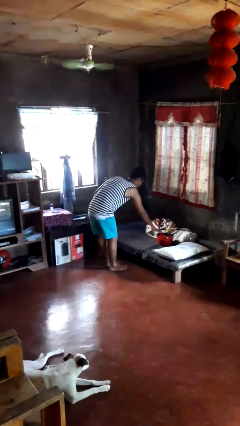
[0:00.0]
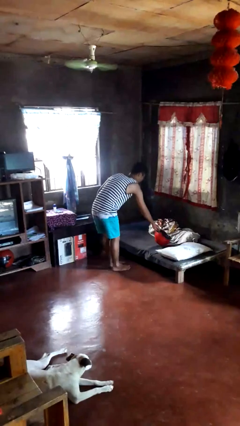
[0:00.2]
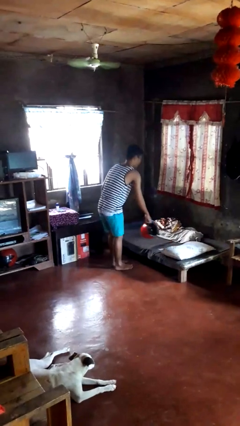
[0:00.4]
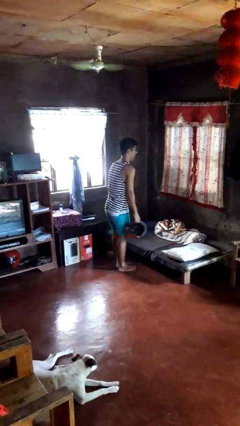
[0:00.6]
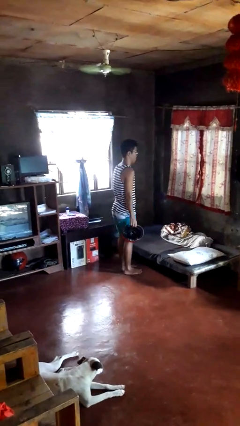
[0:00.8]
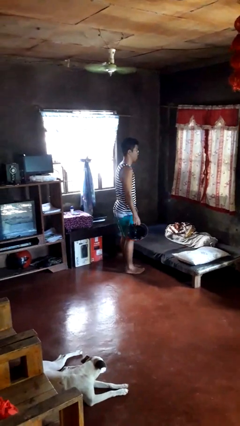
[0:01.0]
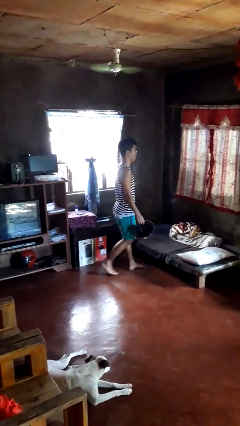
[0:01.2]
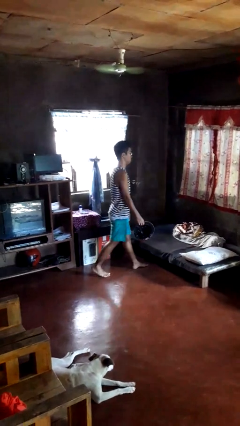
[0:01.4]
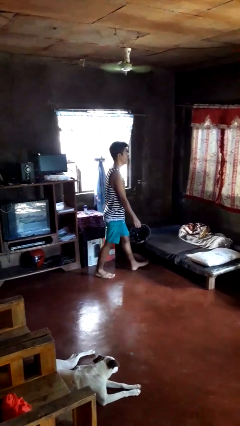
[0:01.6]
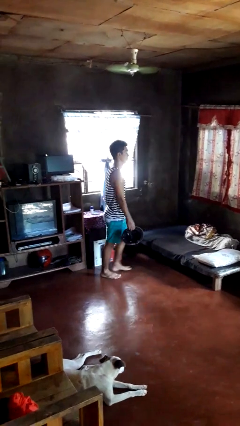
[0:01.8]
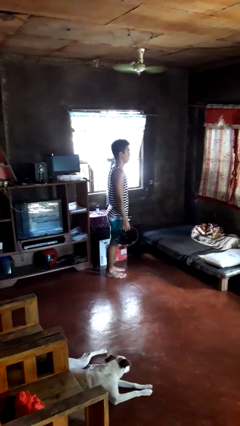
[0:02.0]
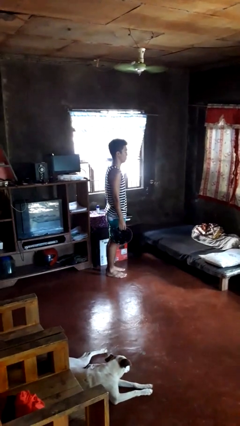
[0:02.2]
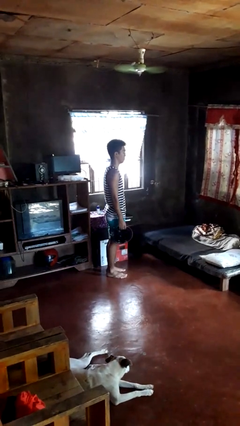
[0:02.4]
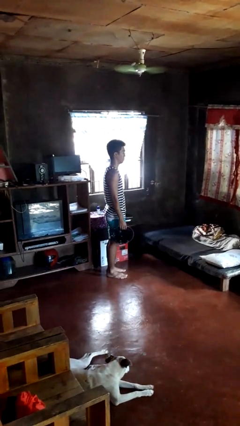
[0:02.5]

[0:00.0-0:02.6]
person picks up object from bed

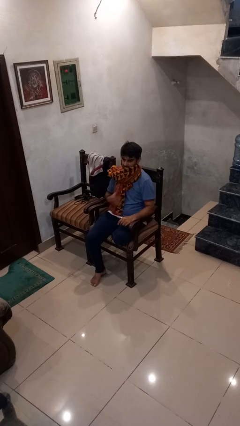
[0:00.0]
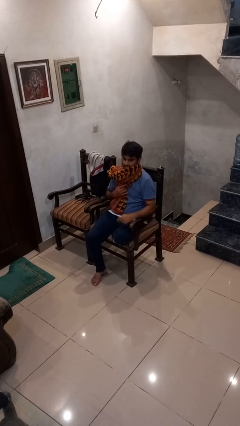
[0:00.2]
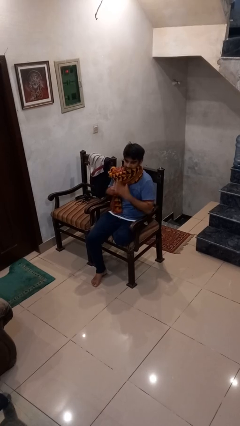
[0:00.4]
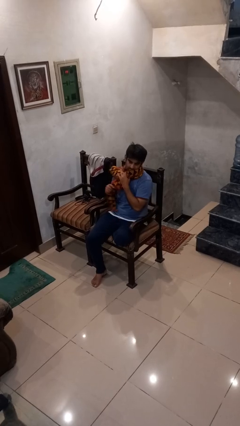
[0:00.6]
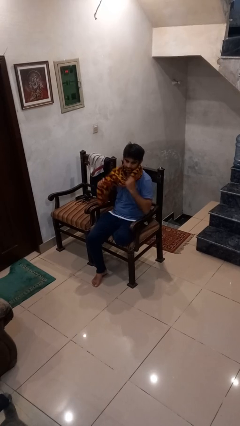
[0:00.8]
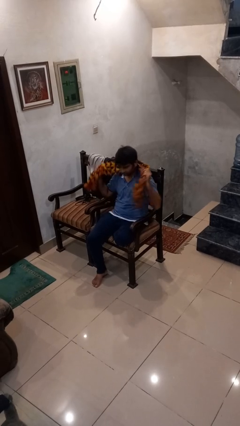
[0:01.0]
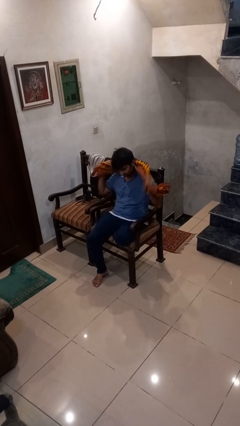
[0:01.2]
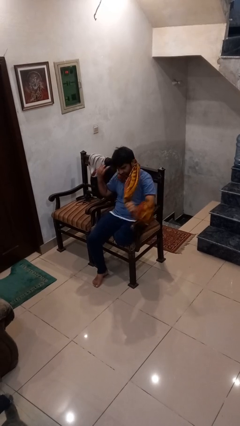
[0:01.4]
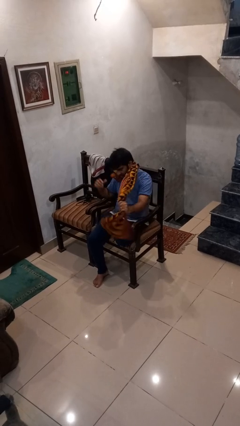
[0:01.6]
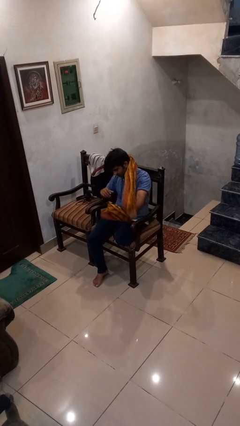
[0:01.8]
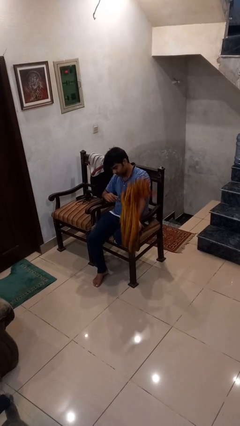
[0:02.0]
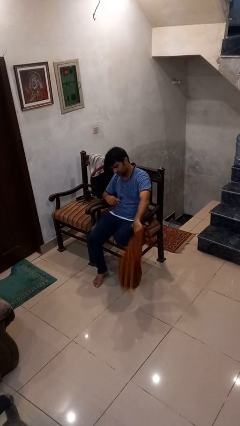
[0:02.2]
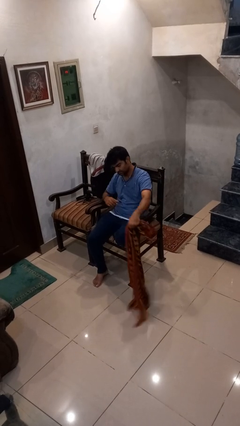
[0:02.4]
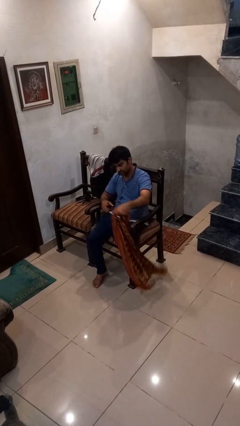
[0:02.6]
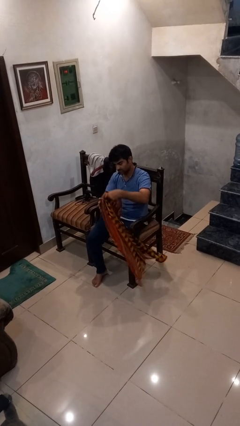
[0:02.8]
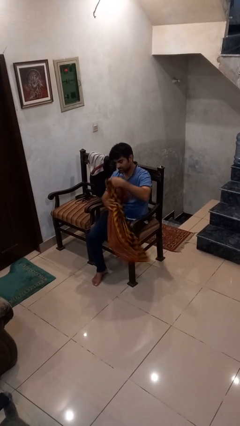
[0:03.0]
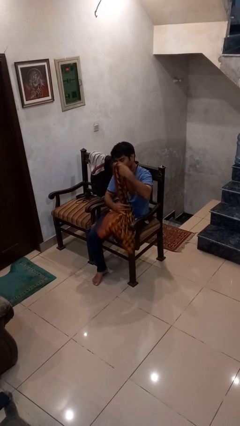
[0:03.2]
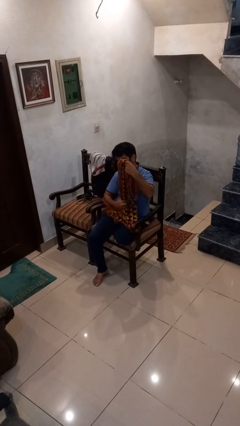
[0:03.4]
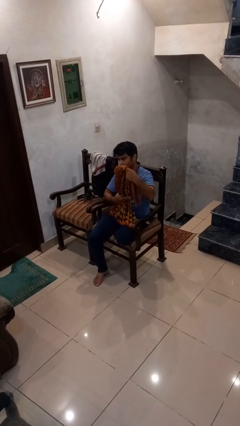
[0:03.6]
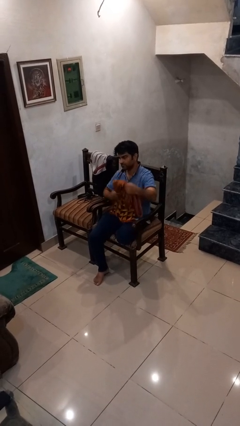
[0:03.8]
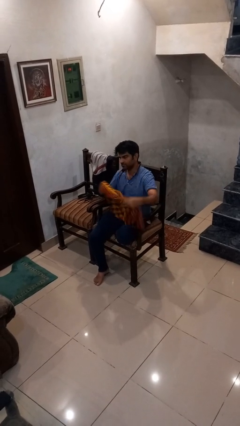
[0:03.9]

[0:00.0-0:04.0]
person takes off scarf

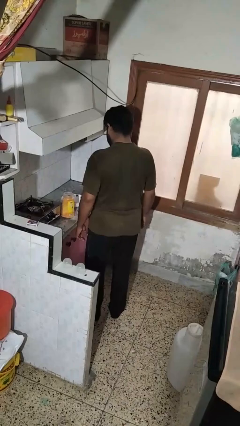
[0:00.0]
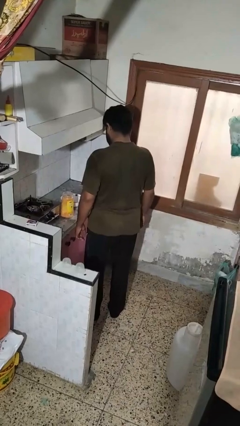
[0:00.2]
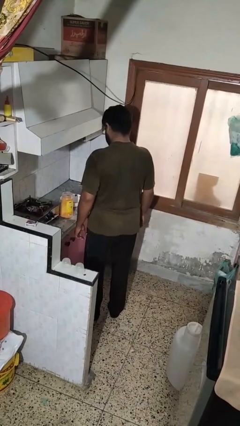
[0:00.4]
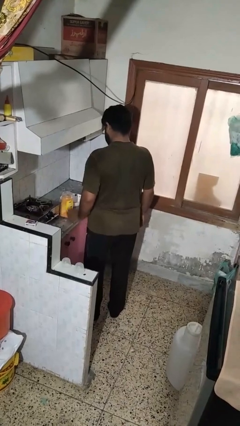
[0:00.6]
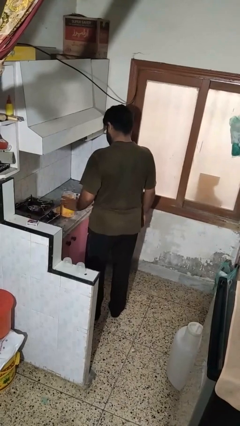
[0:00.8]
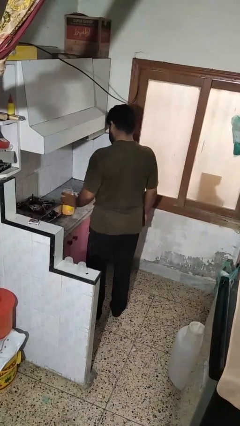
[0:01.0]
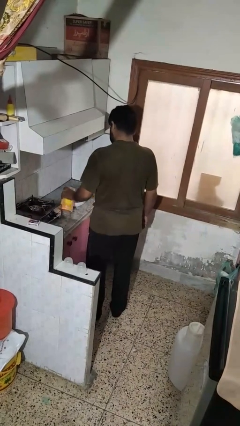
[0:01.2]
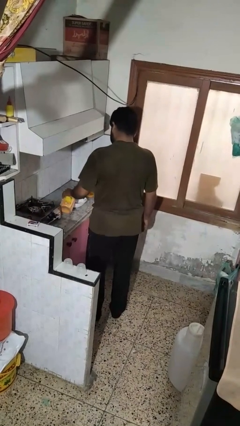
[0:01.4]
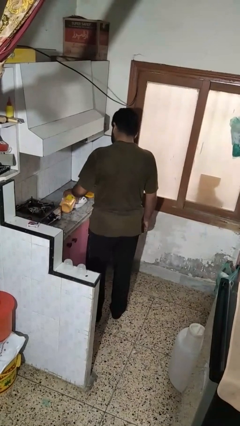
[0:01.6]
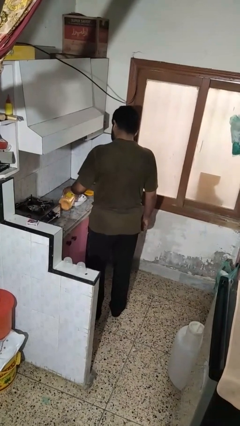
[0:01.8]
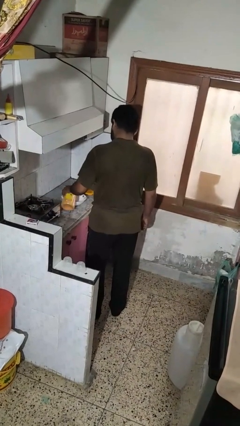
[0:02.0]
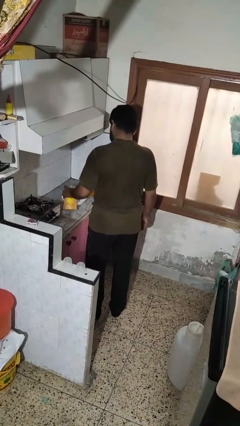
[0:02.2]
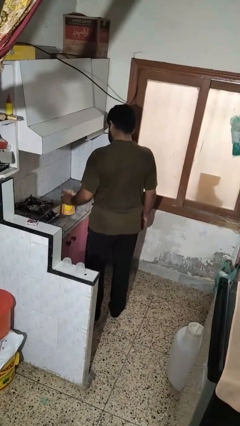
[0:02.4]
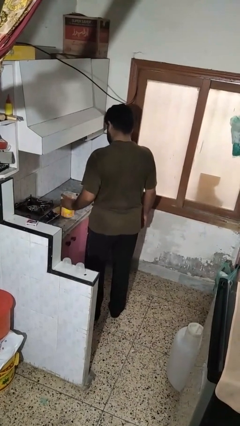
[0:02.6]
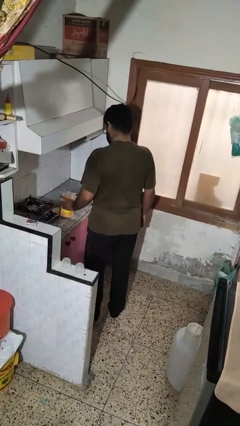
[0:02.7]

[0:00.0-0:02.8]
person pours into bowl

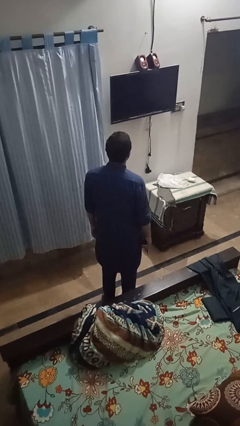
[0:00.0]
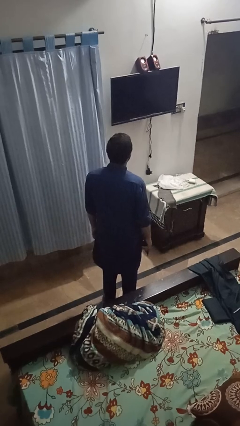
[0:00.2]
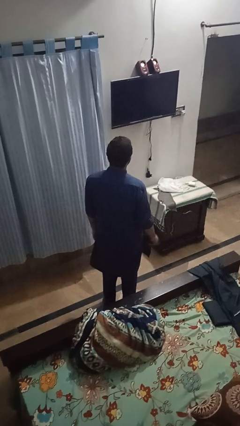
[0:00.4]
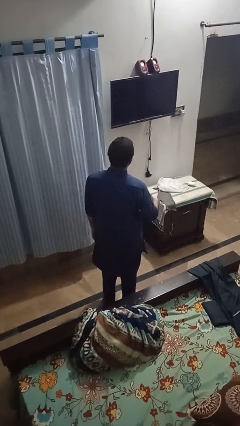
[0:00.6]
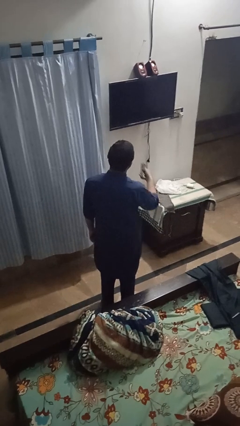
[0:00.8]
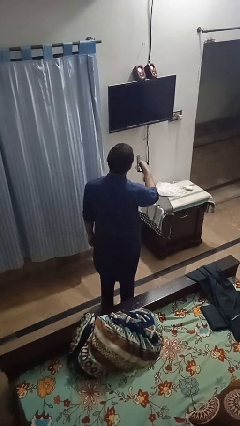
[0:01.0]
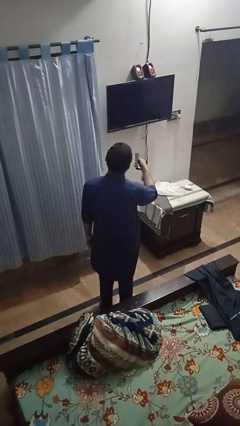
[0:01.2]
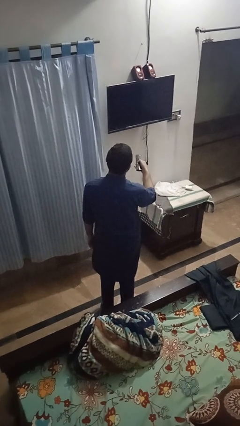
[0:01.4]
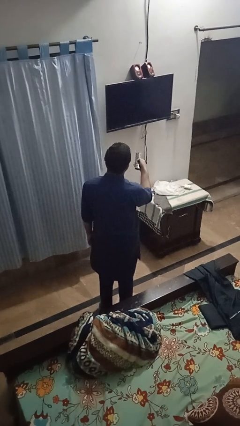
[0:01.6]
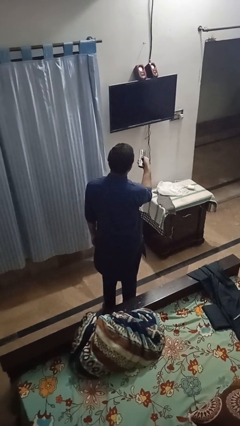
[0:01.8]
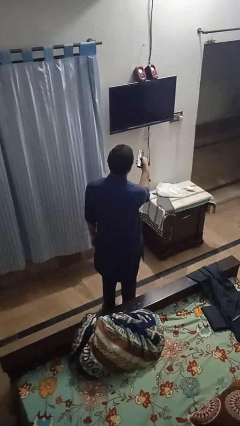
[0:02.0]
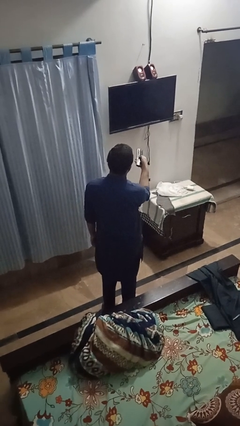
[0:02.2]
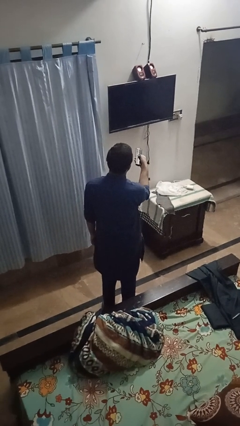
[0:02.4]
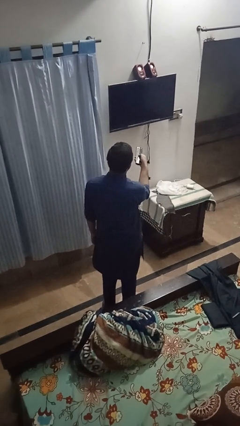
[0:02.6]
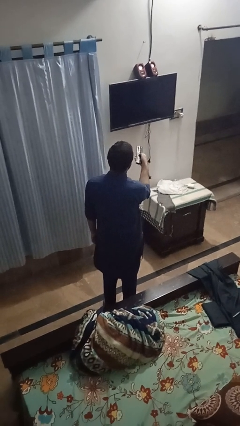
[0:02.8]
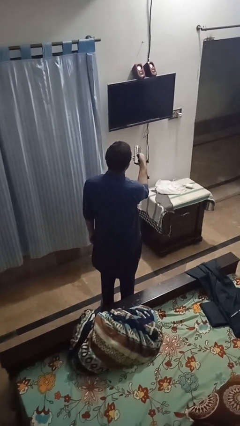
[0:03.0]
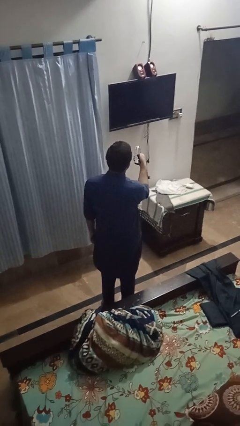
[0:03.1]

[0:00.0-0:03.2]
person uses television remote

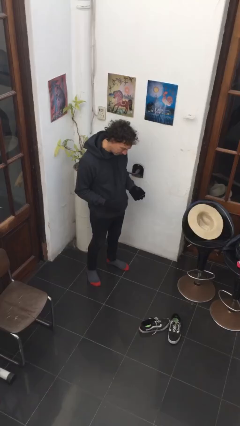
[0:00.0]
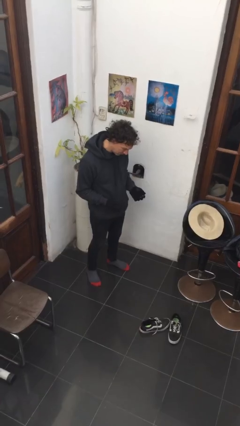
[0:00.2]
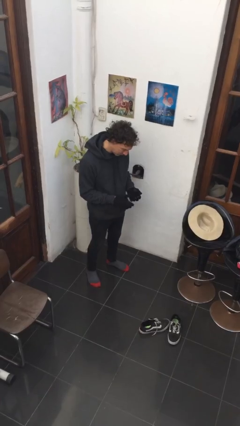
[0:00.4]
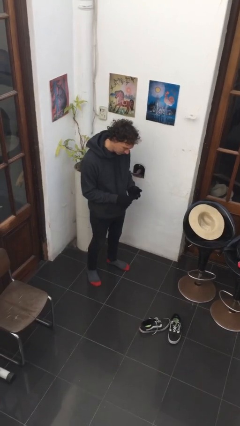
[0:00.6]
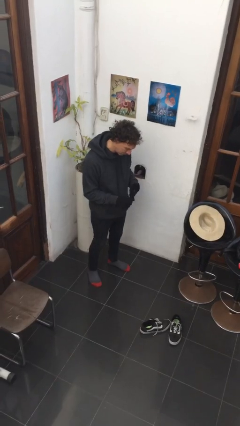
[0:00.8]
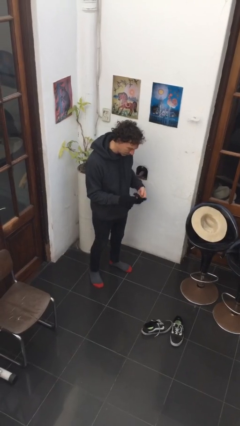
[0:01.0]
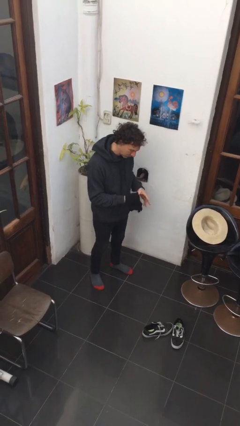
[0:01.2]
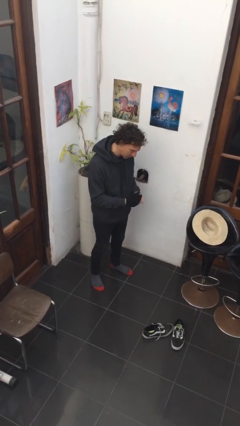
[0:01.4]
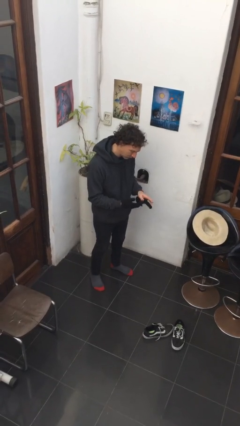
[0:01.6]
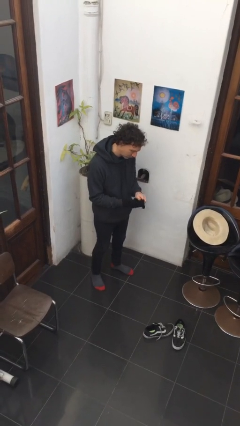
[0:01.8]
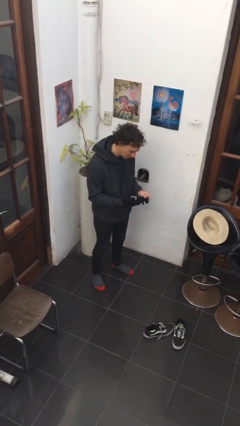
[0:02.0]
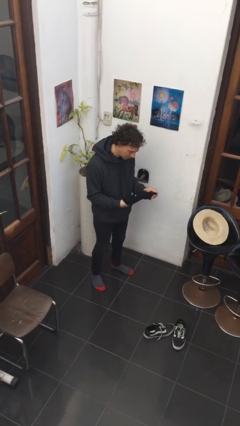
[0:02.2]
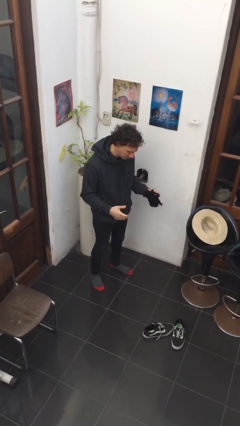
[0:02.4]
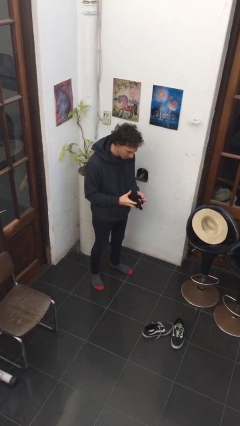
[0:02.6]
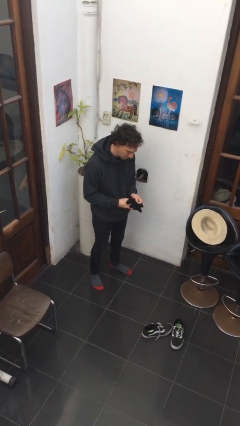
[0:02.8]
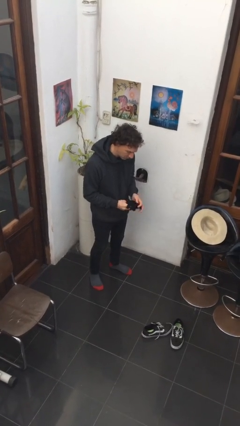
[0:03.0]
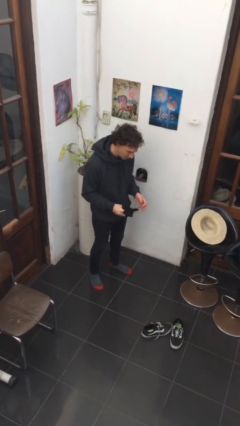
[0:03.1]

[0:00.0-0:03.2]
person takes off gloves

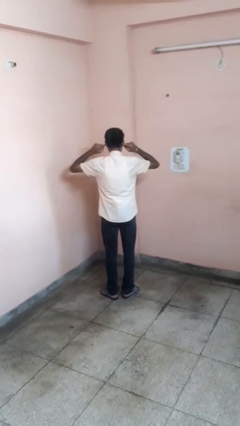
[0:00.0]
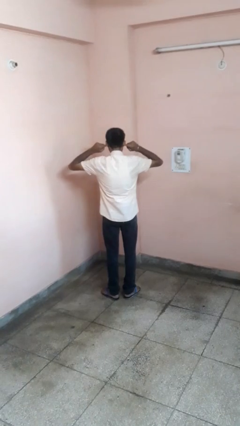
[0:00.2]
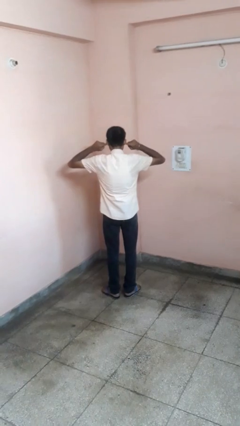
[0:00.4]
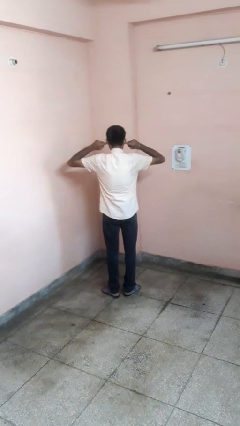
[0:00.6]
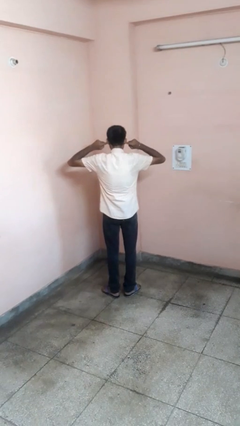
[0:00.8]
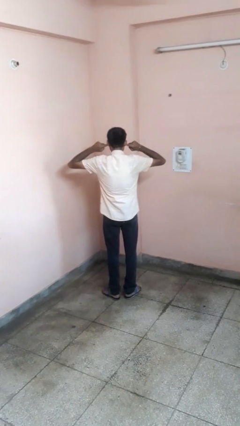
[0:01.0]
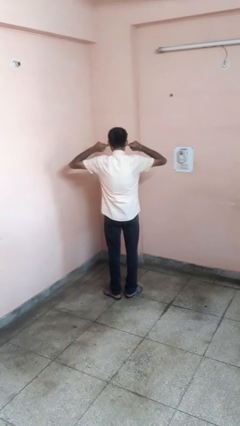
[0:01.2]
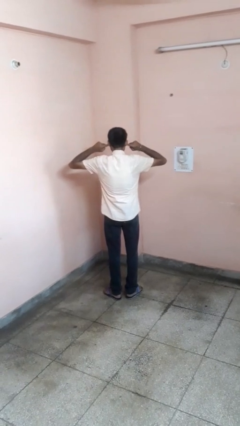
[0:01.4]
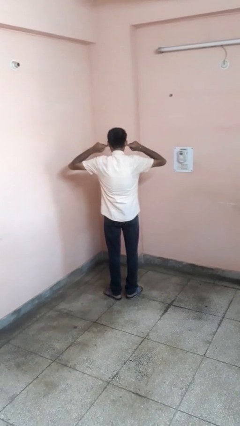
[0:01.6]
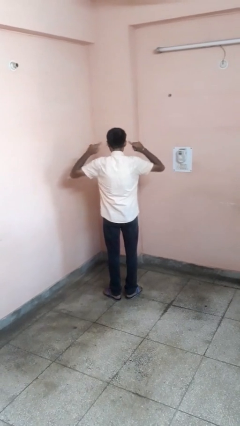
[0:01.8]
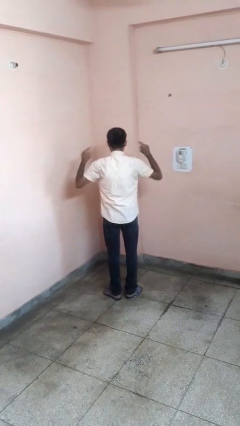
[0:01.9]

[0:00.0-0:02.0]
person puts fingers in ear

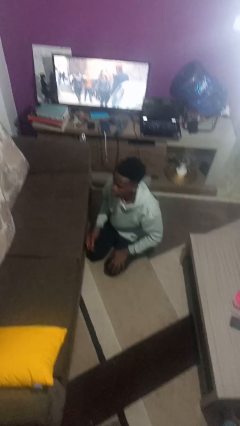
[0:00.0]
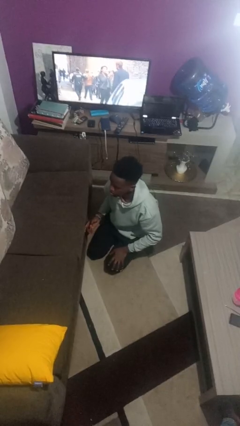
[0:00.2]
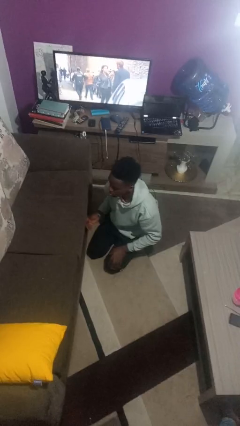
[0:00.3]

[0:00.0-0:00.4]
person searches under couch
